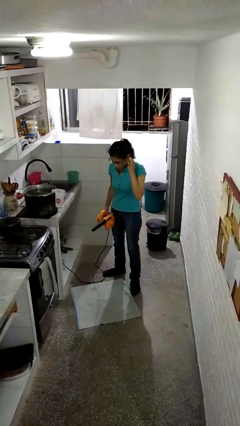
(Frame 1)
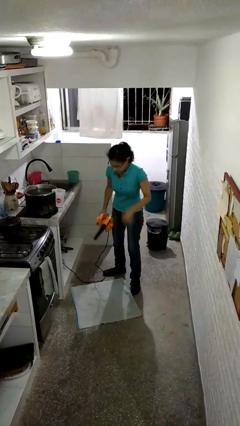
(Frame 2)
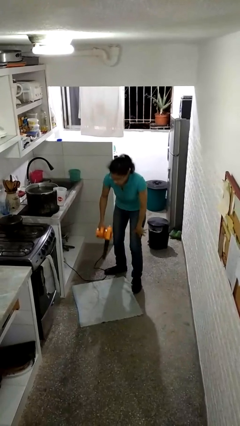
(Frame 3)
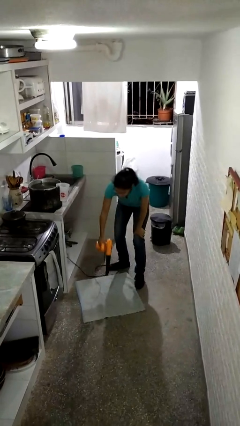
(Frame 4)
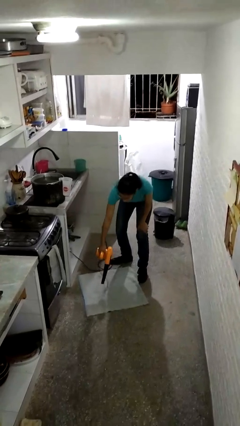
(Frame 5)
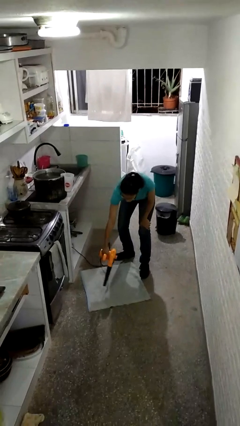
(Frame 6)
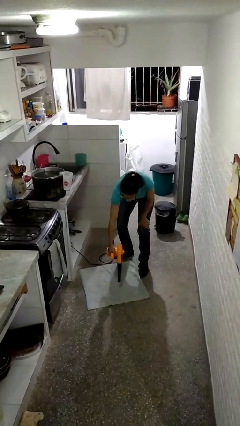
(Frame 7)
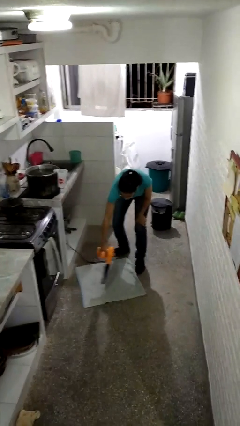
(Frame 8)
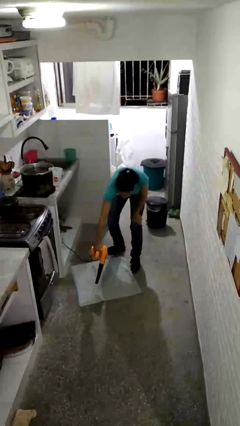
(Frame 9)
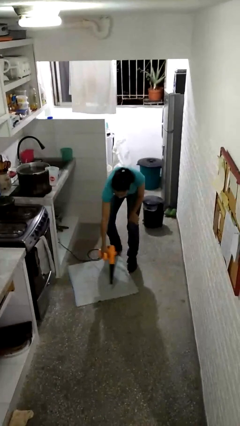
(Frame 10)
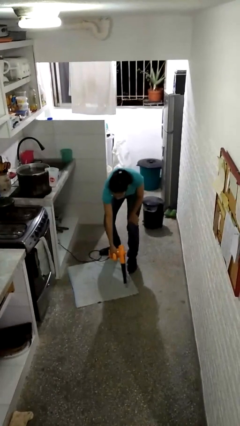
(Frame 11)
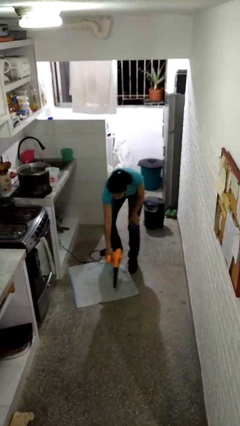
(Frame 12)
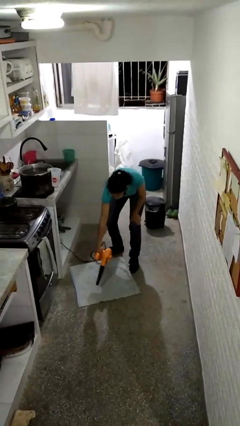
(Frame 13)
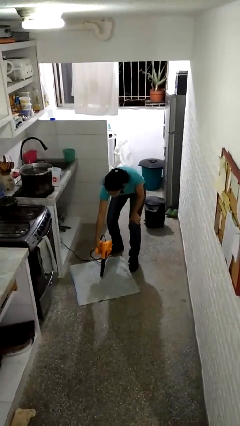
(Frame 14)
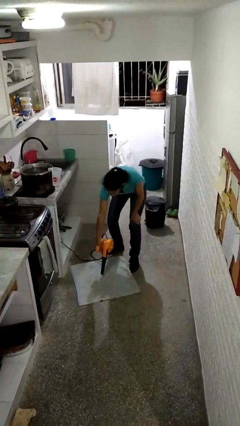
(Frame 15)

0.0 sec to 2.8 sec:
person vacuums carpet

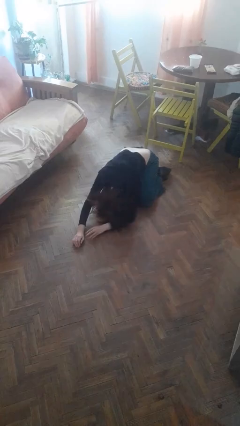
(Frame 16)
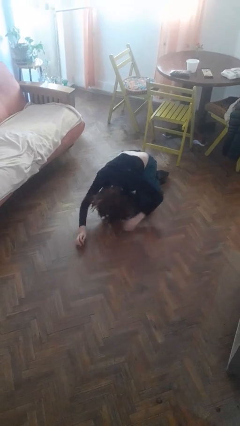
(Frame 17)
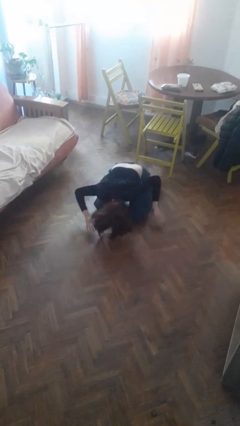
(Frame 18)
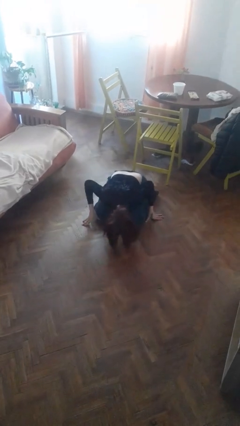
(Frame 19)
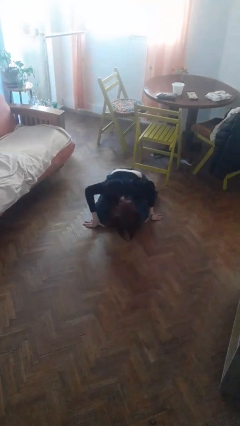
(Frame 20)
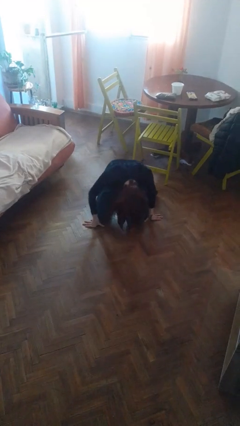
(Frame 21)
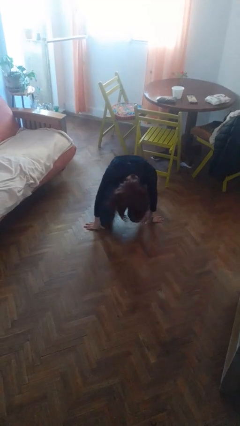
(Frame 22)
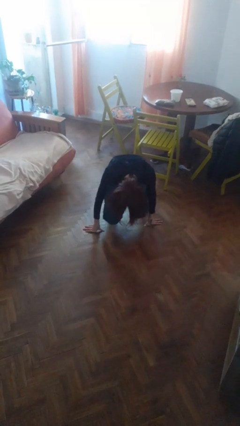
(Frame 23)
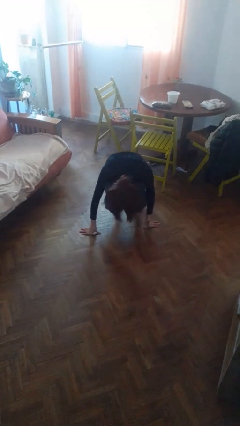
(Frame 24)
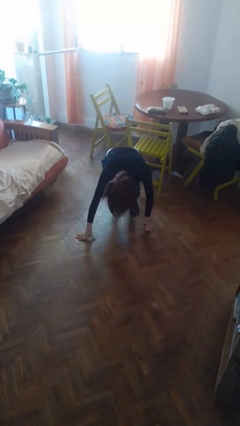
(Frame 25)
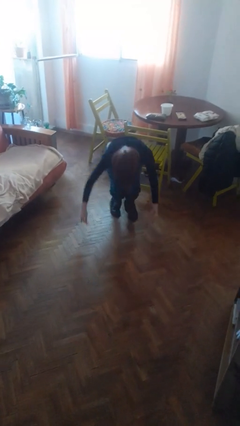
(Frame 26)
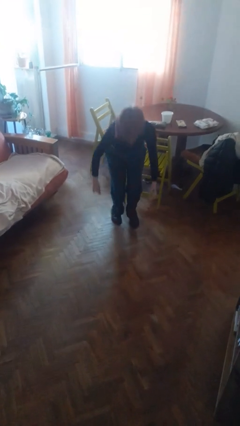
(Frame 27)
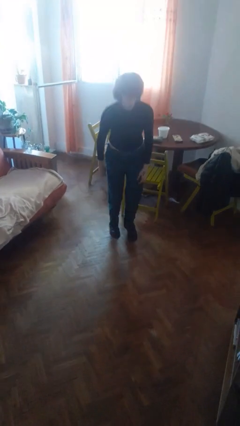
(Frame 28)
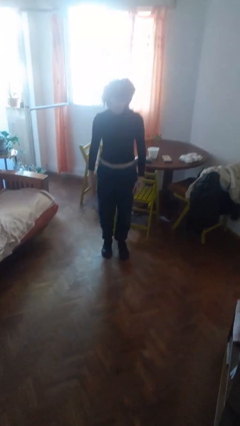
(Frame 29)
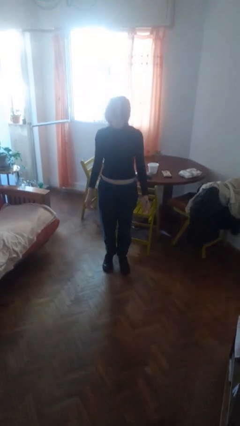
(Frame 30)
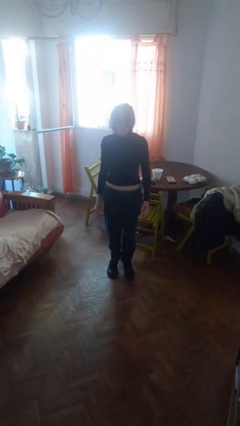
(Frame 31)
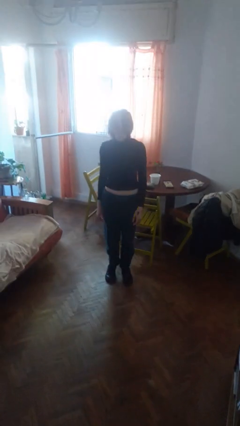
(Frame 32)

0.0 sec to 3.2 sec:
person stands up from floor

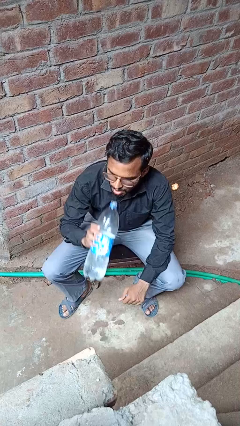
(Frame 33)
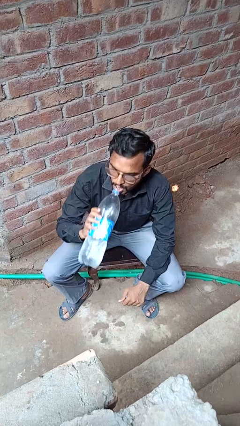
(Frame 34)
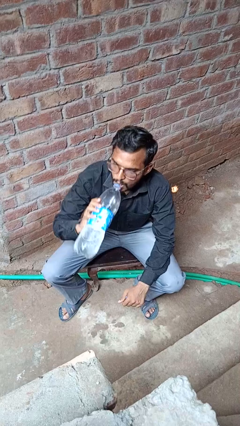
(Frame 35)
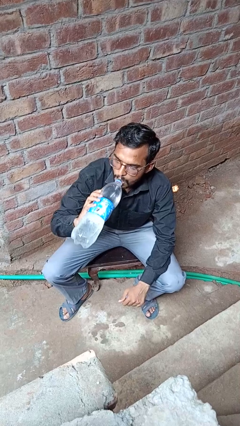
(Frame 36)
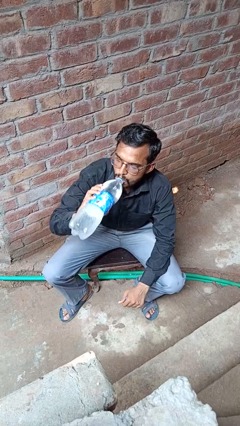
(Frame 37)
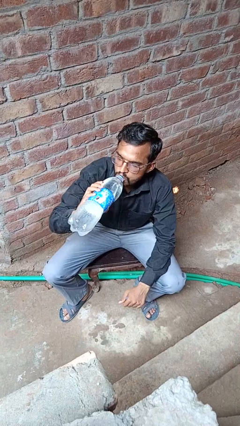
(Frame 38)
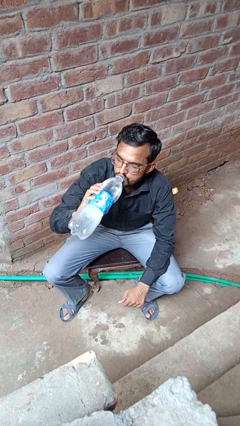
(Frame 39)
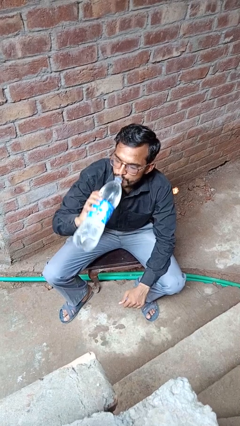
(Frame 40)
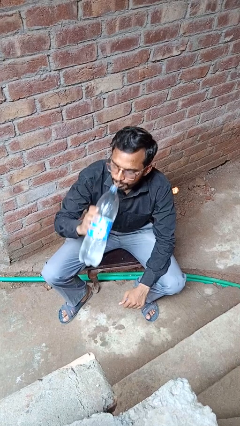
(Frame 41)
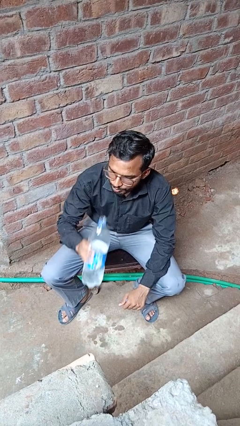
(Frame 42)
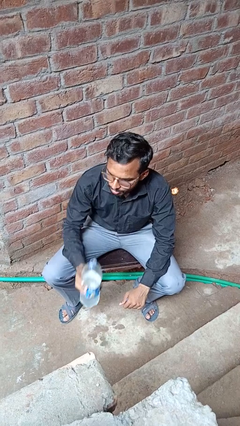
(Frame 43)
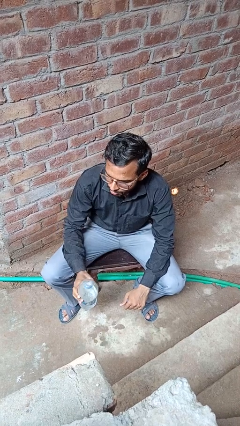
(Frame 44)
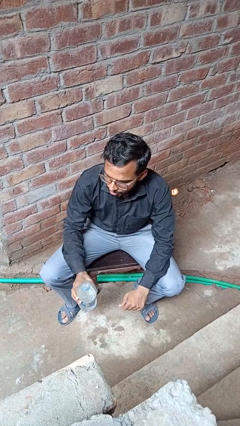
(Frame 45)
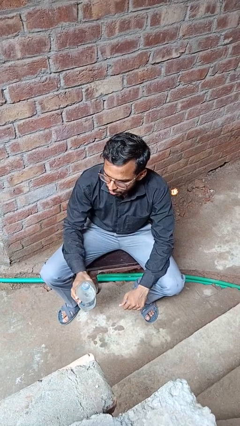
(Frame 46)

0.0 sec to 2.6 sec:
person drinks from bottle

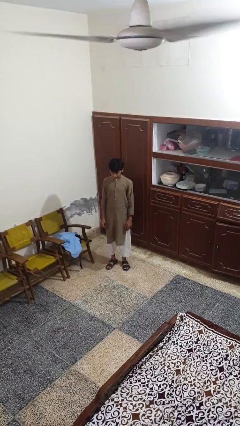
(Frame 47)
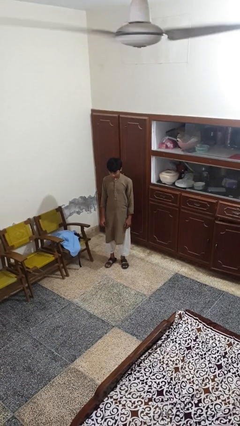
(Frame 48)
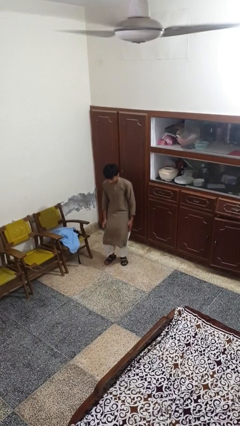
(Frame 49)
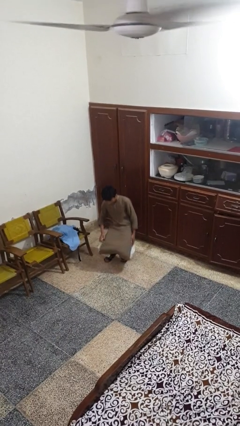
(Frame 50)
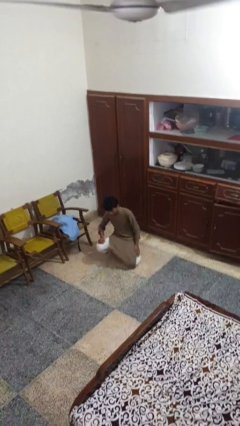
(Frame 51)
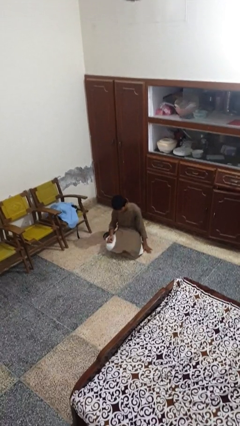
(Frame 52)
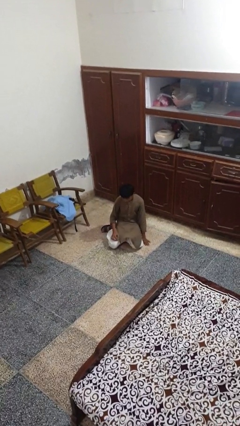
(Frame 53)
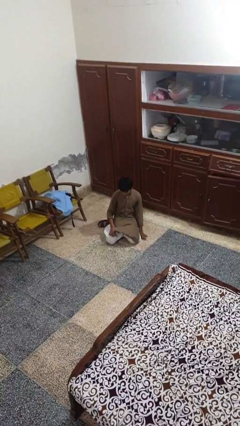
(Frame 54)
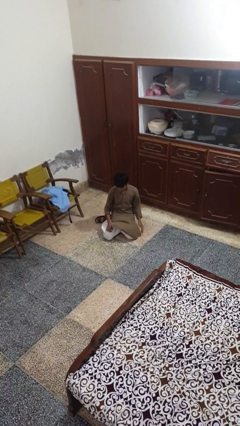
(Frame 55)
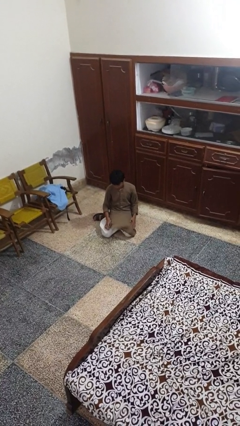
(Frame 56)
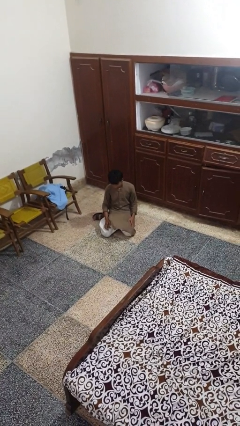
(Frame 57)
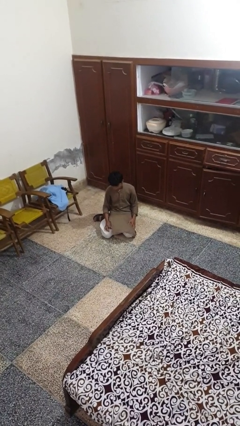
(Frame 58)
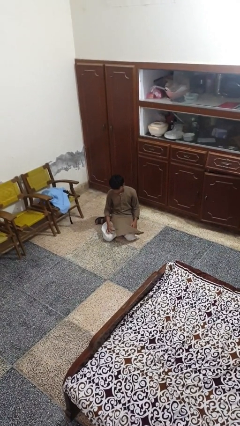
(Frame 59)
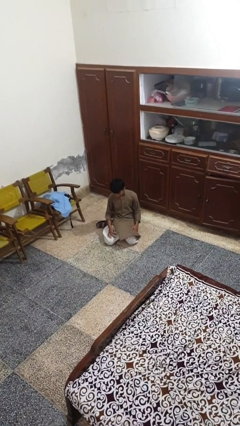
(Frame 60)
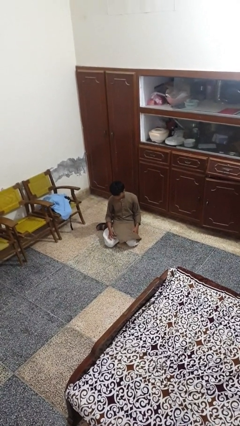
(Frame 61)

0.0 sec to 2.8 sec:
person falls while standing

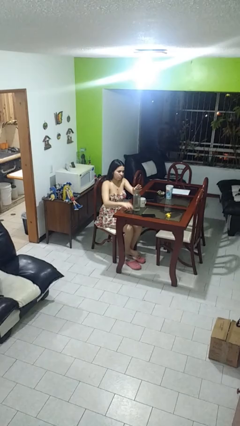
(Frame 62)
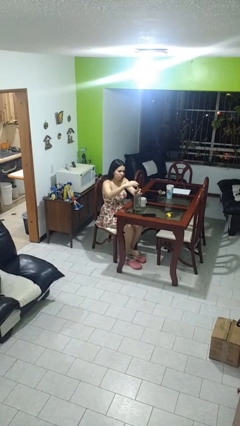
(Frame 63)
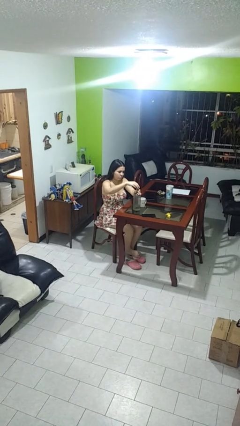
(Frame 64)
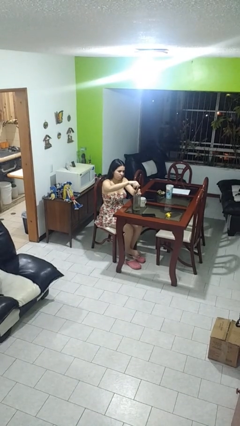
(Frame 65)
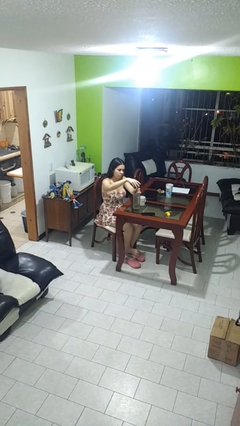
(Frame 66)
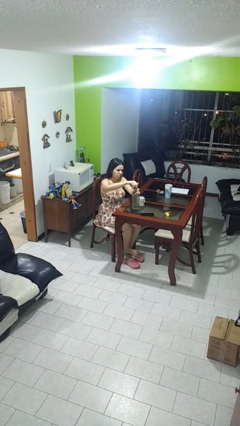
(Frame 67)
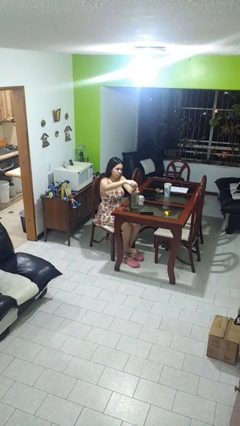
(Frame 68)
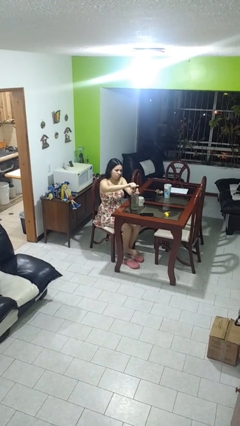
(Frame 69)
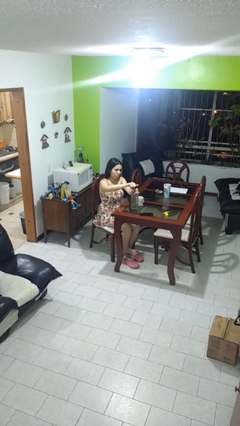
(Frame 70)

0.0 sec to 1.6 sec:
person screws lid to bottle

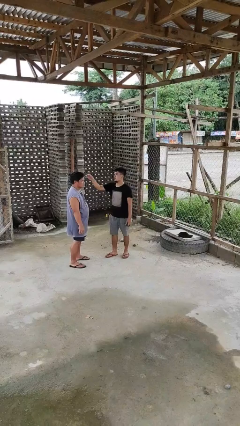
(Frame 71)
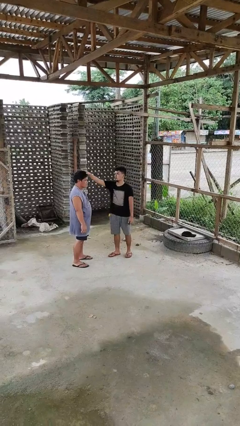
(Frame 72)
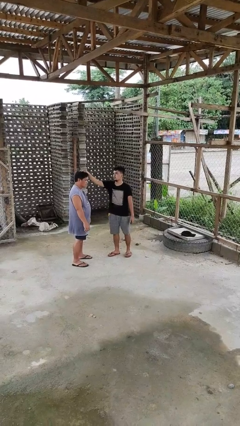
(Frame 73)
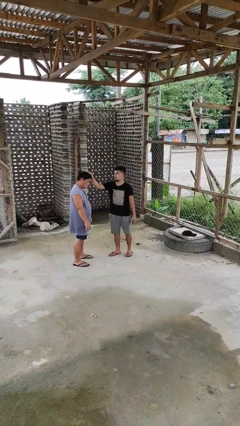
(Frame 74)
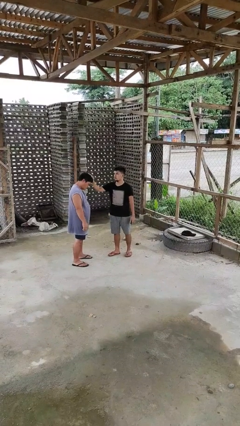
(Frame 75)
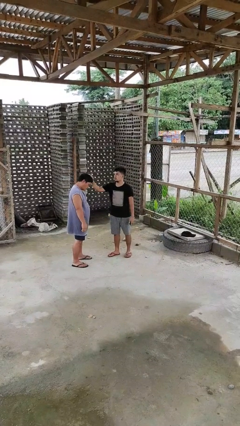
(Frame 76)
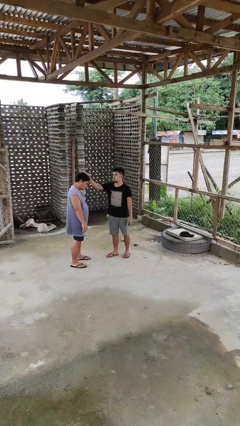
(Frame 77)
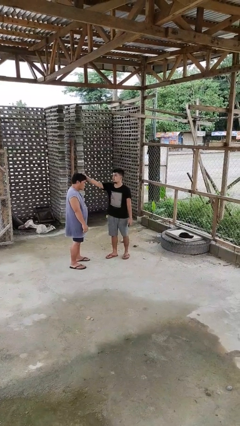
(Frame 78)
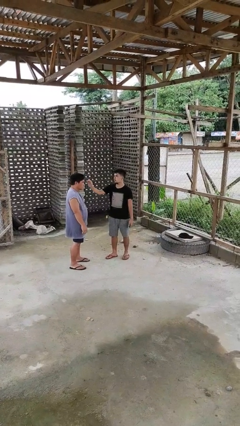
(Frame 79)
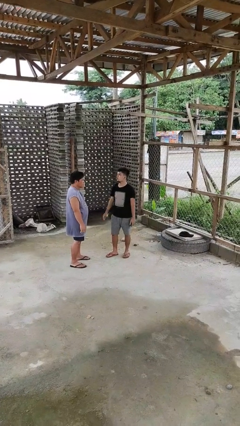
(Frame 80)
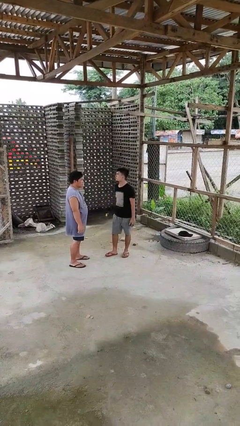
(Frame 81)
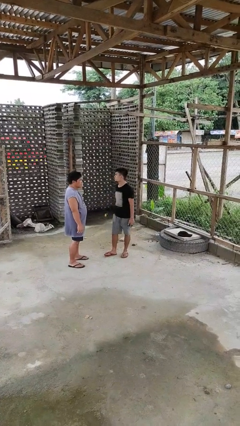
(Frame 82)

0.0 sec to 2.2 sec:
person grabs person by hair

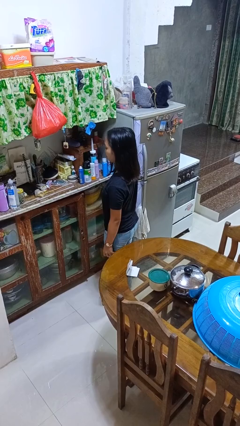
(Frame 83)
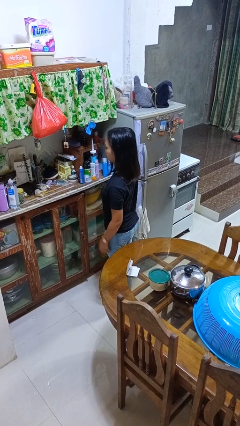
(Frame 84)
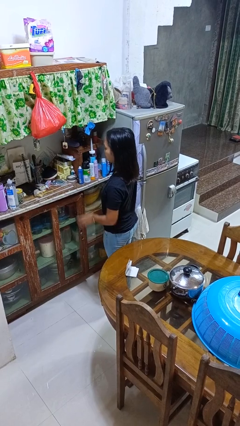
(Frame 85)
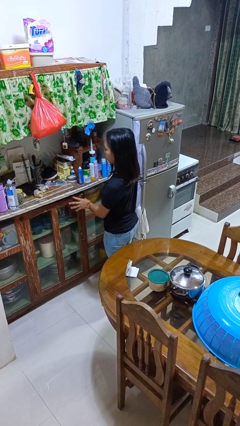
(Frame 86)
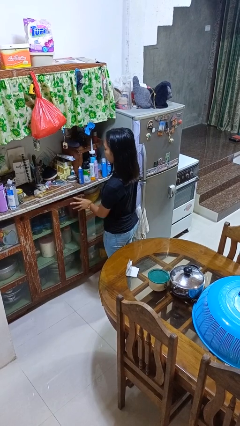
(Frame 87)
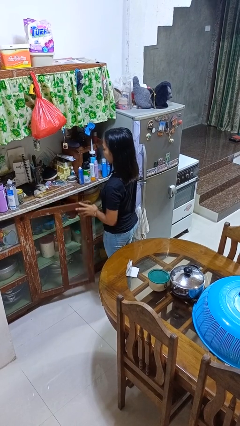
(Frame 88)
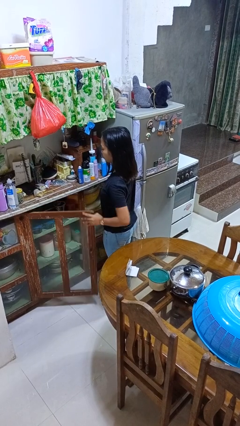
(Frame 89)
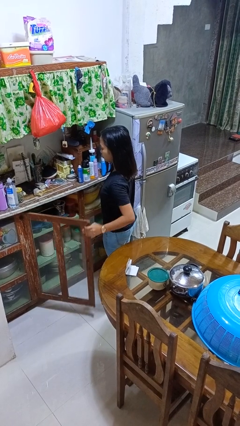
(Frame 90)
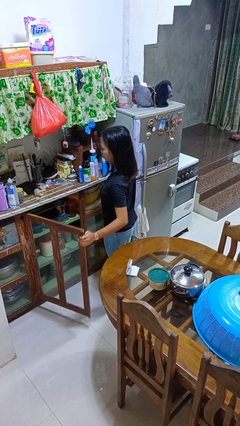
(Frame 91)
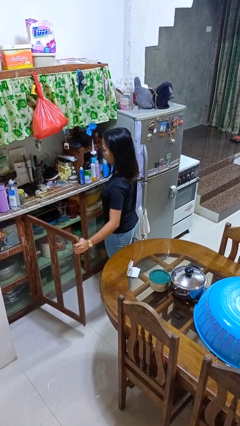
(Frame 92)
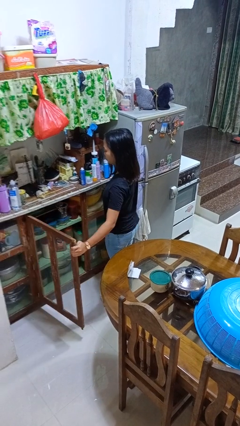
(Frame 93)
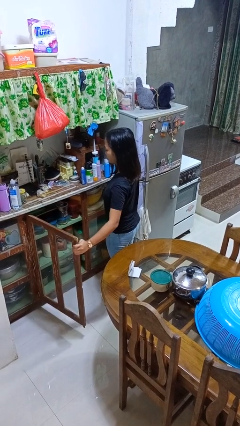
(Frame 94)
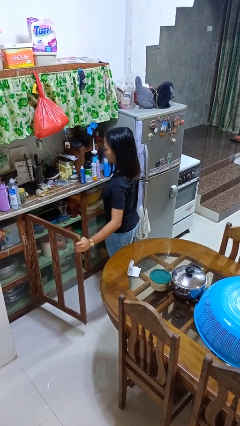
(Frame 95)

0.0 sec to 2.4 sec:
person opens cabinet
